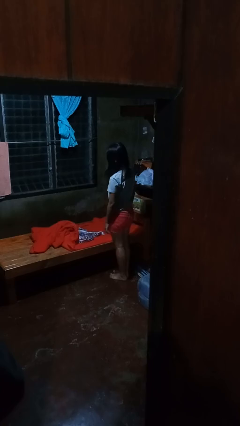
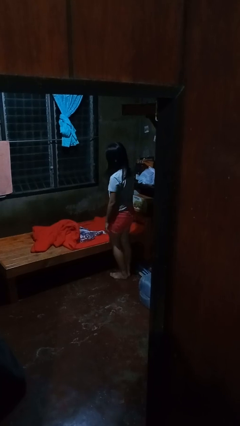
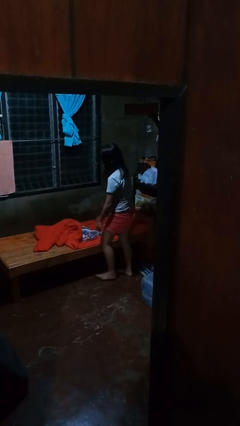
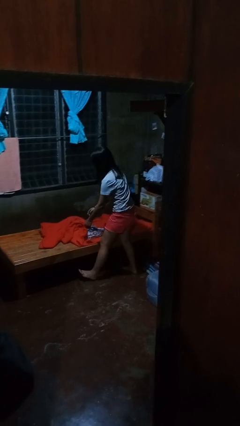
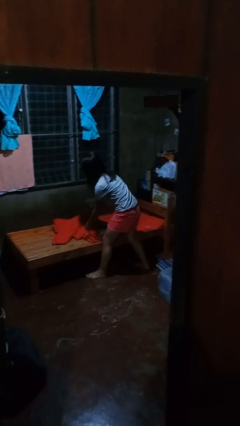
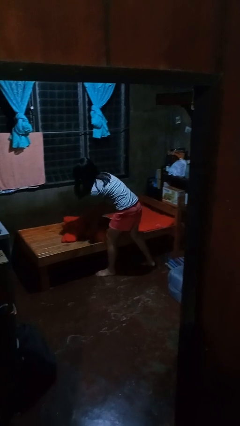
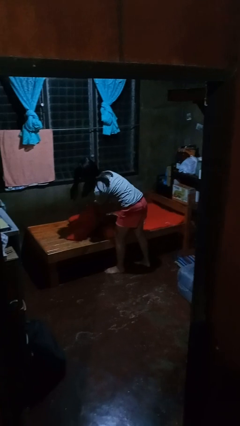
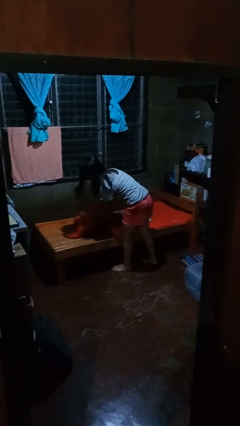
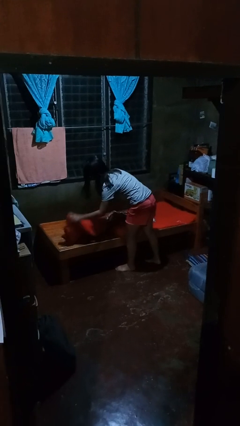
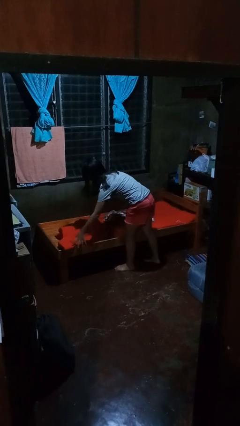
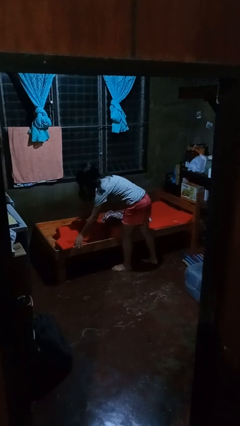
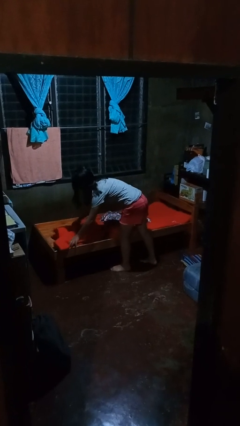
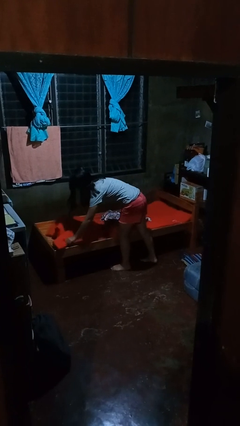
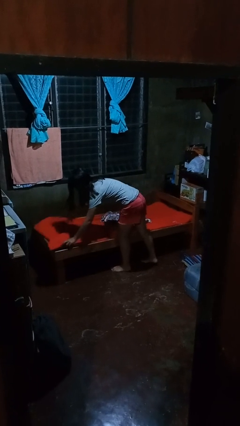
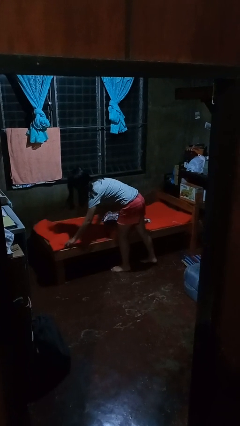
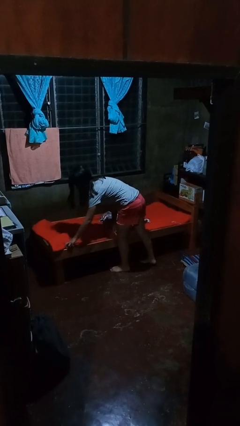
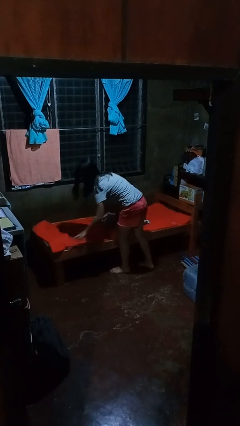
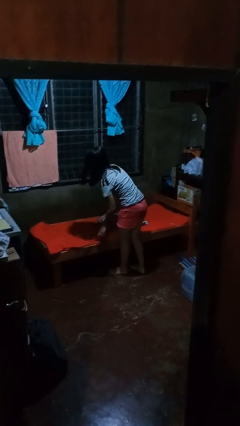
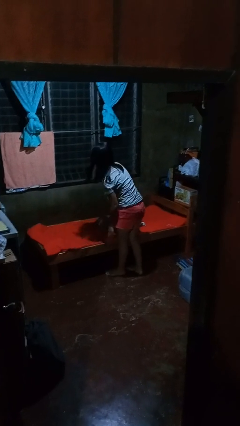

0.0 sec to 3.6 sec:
person makes bed

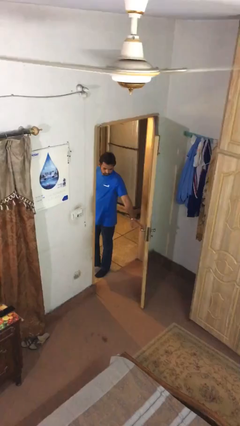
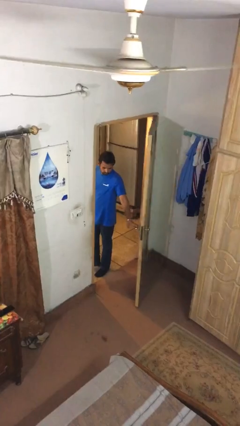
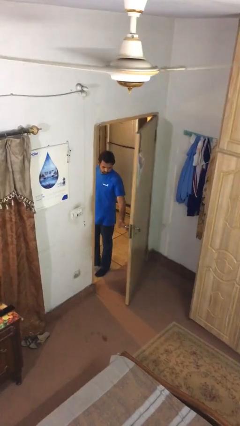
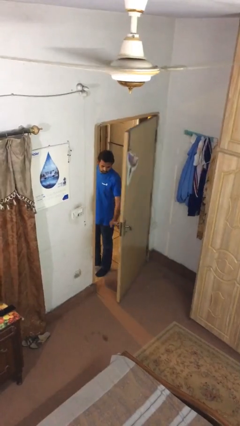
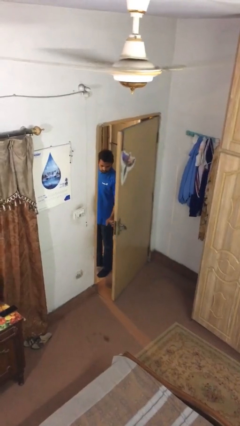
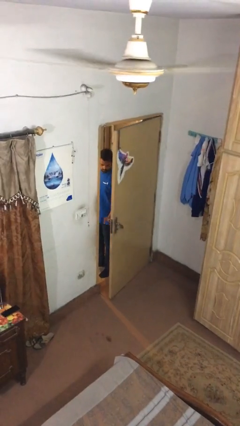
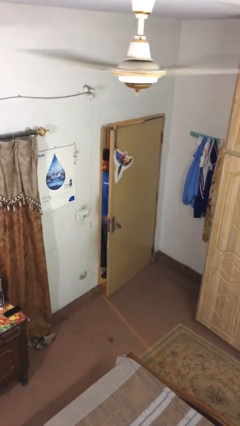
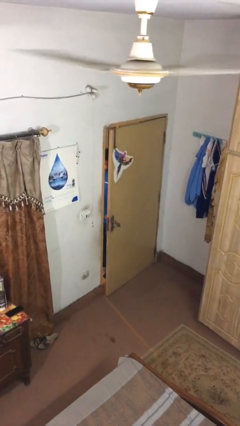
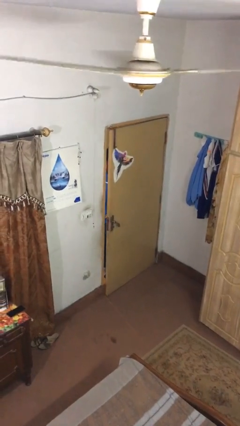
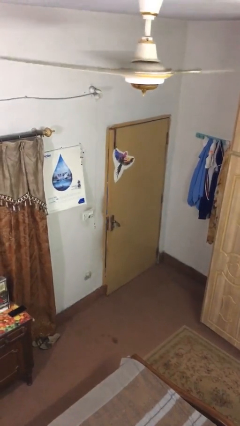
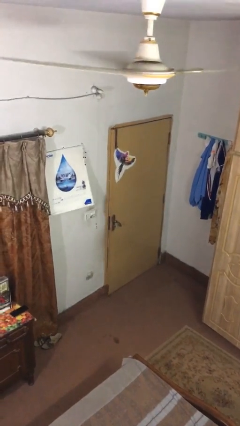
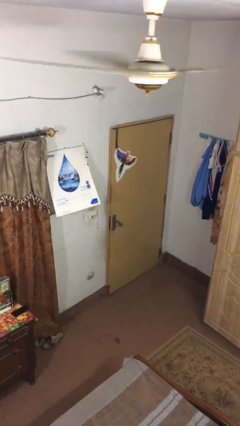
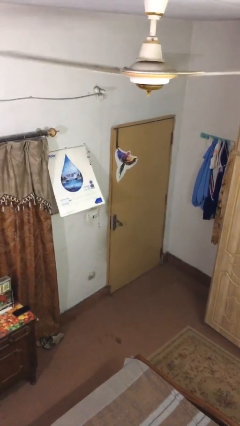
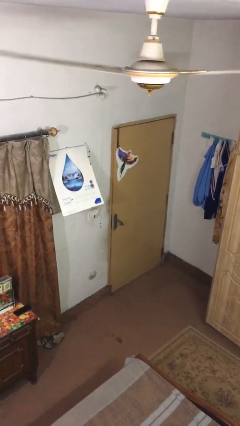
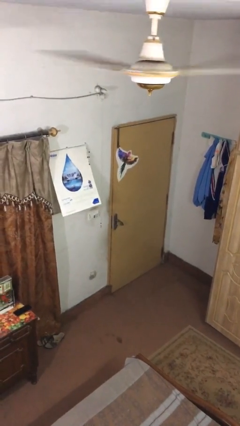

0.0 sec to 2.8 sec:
person closes facility door

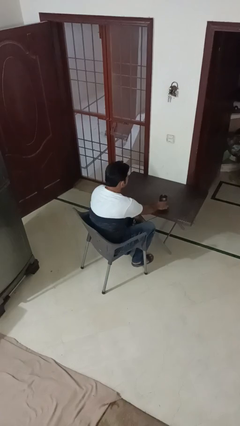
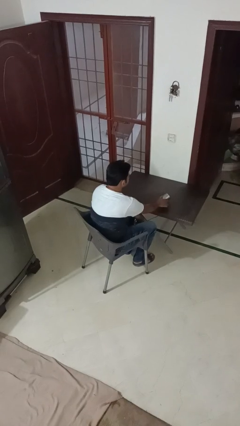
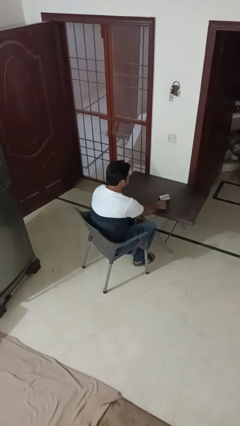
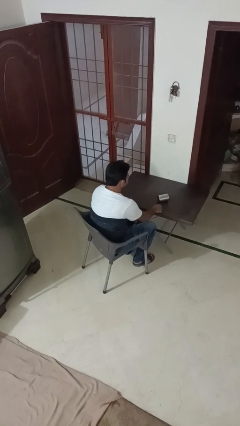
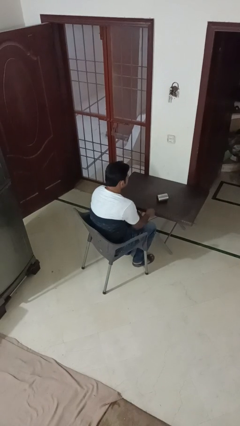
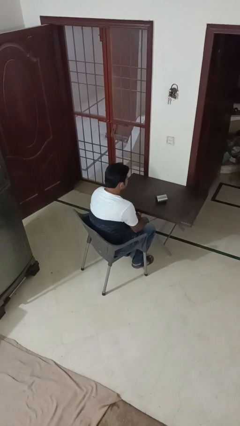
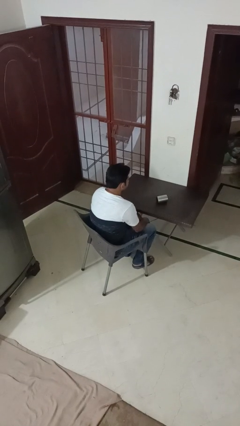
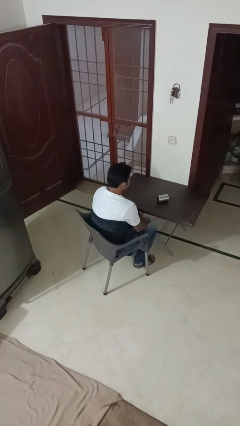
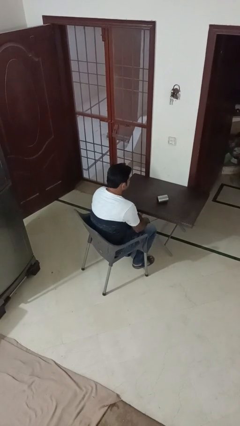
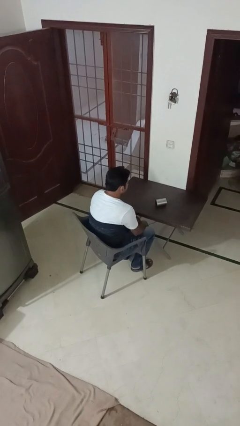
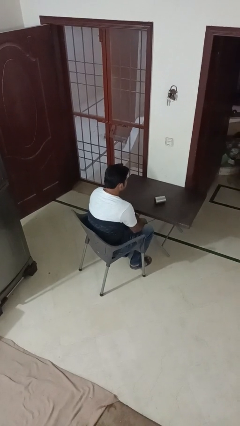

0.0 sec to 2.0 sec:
person knocks over glass

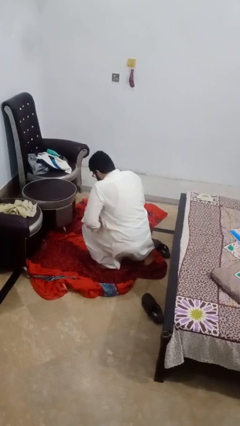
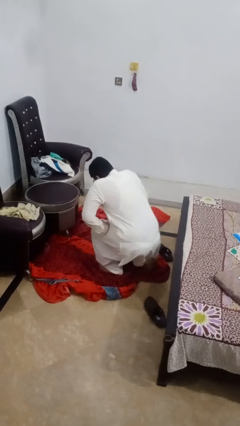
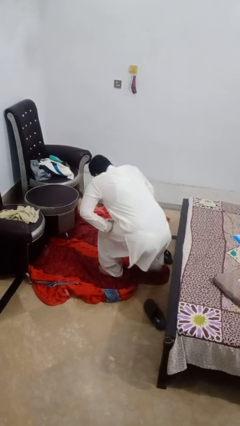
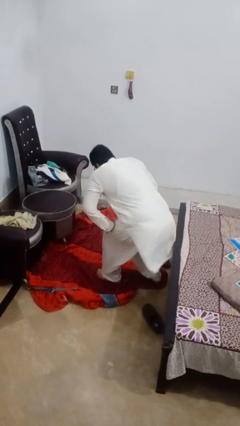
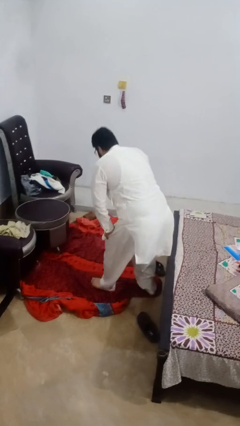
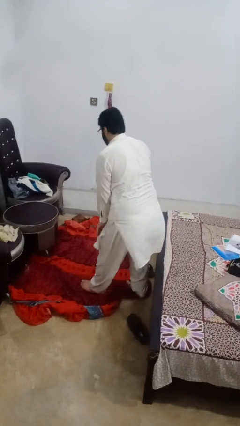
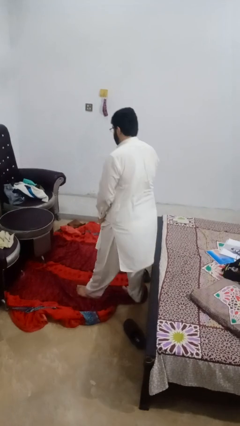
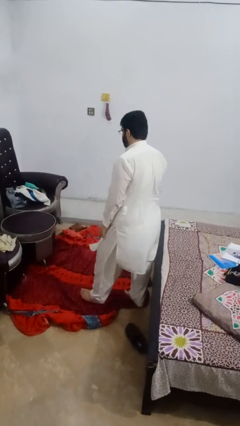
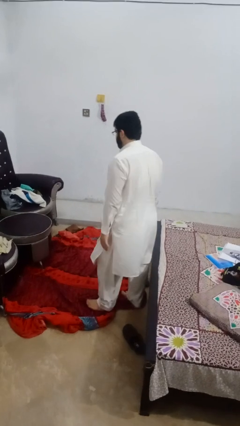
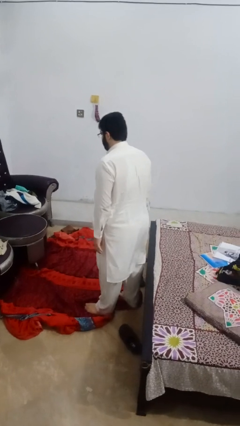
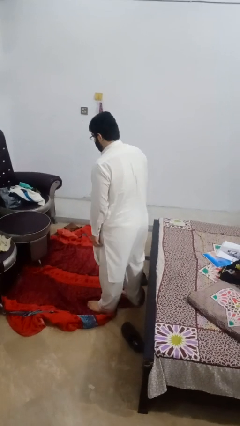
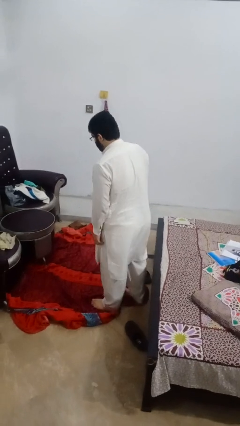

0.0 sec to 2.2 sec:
person stands up from floor

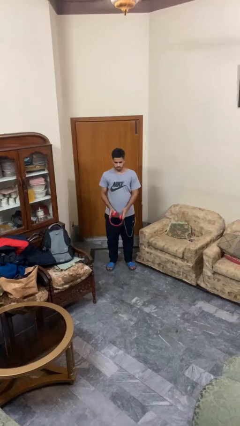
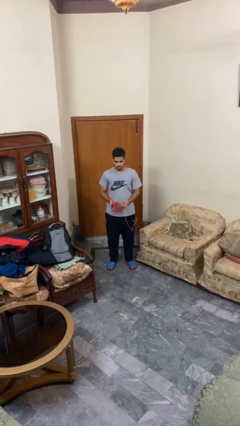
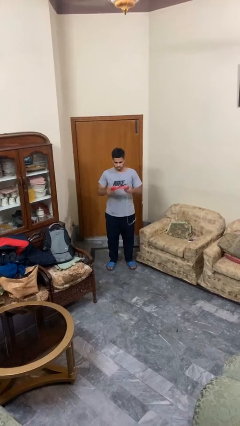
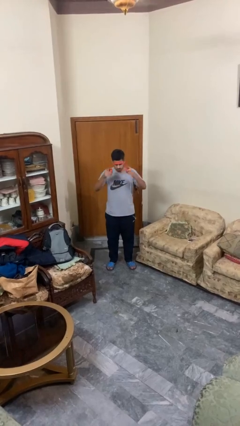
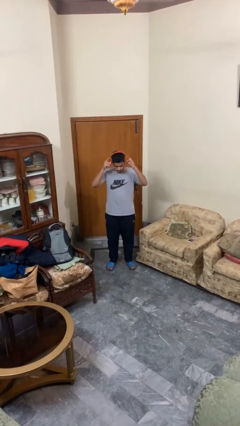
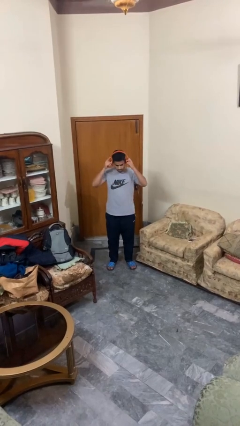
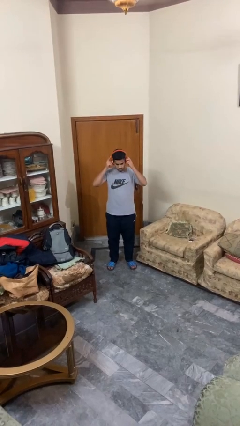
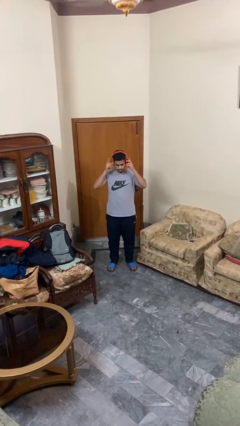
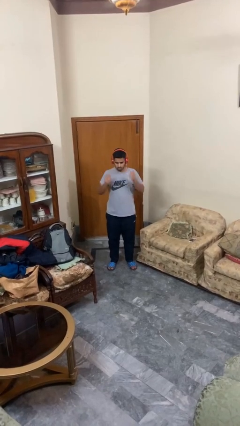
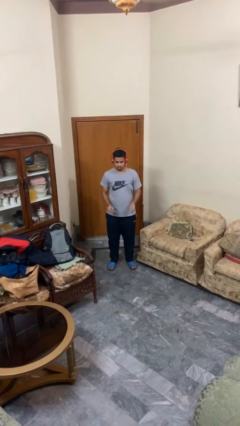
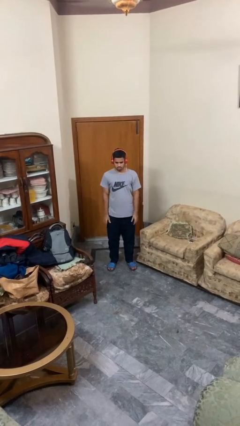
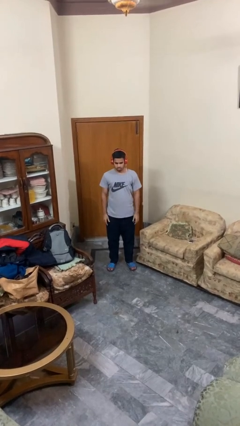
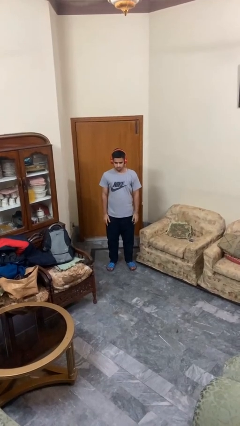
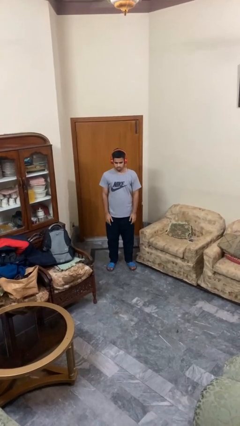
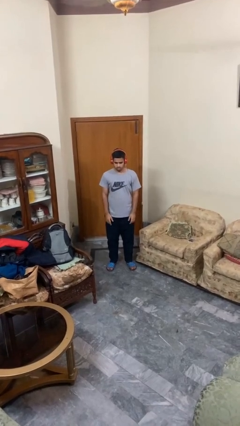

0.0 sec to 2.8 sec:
person puts on headphones

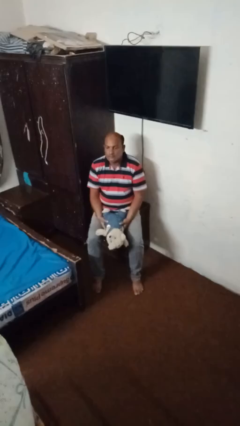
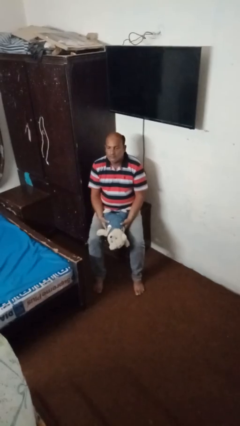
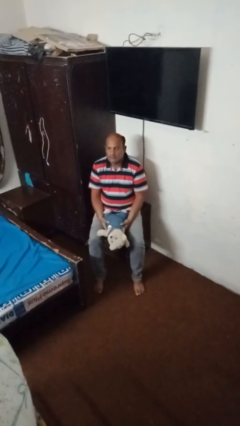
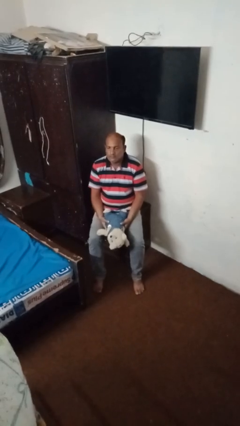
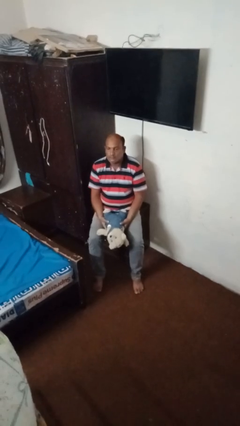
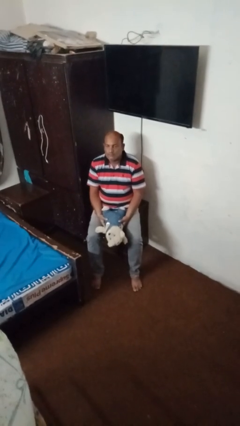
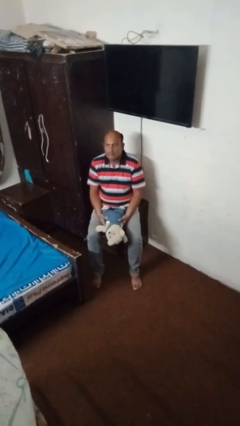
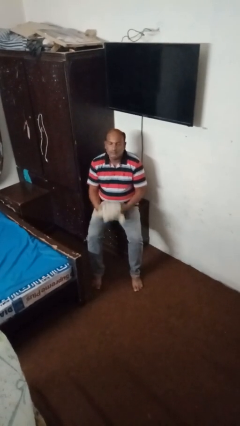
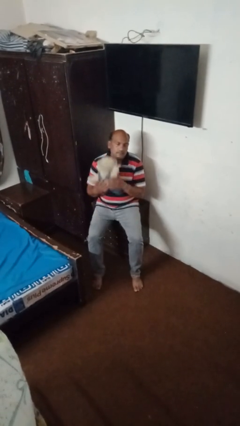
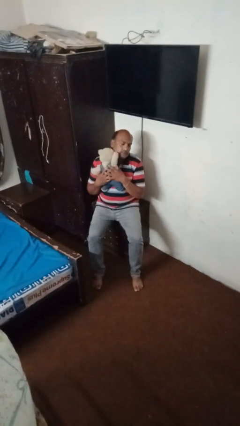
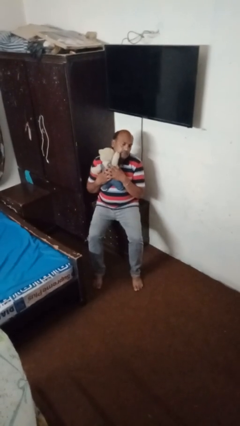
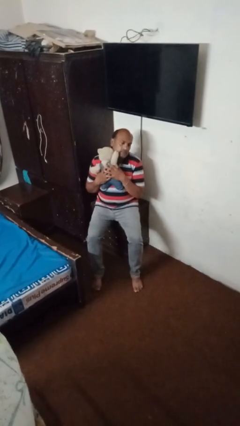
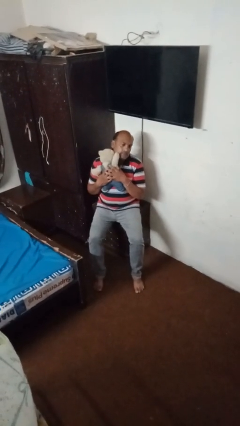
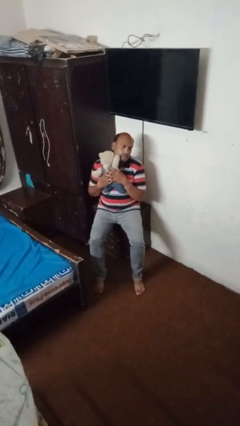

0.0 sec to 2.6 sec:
person hugs stuffed animal

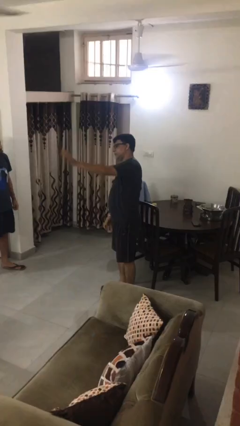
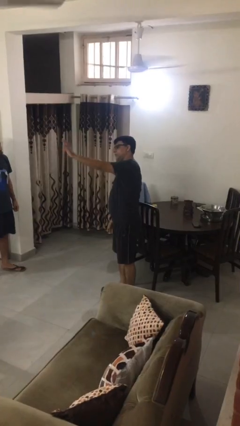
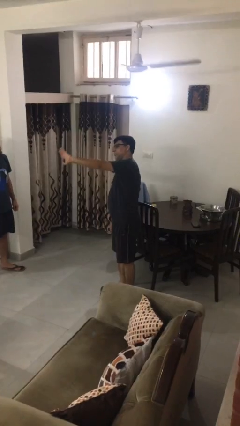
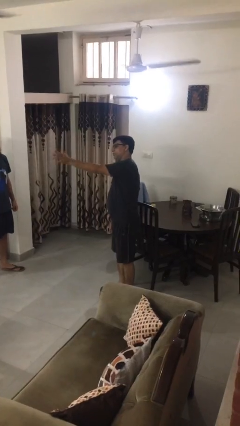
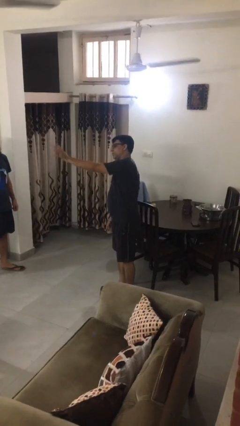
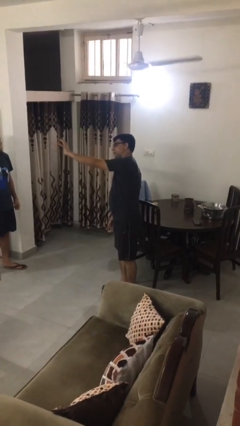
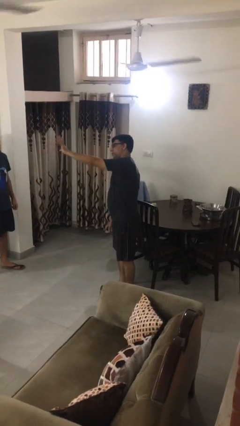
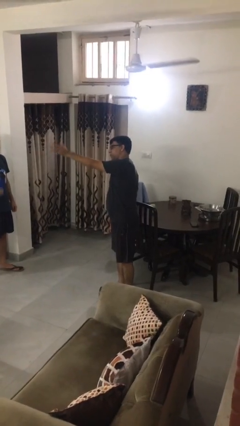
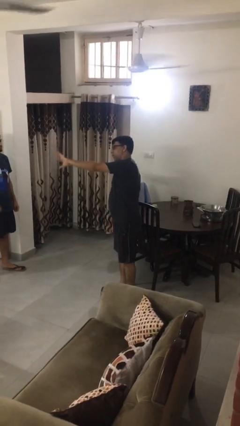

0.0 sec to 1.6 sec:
person waves at person
